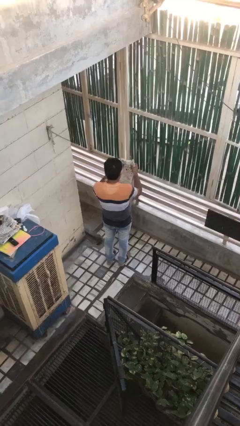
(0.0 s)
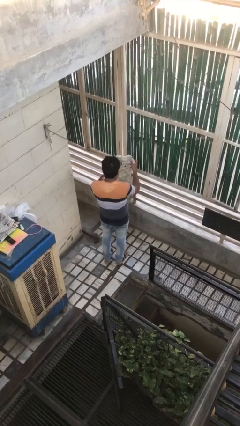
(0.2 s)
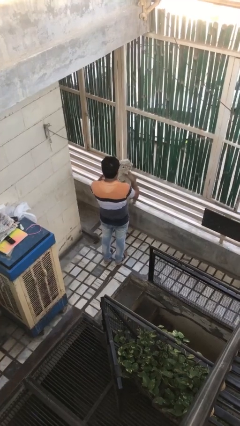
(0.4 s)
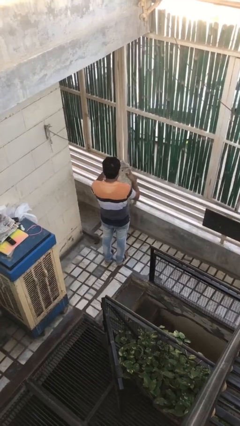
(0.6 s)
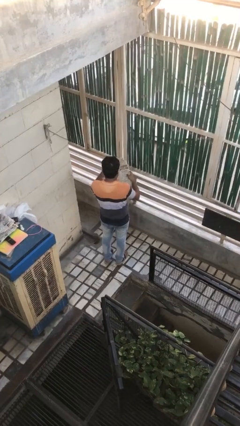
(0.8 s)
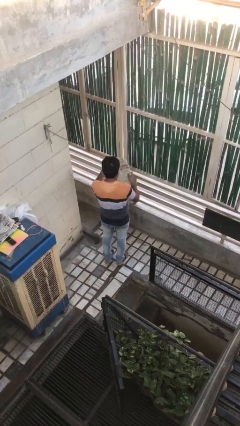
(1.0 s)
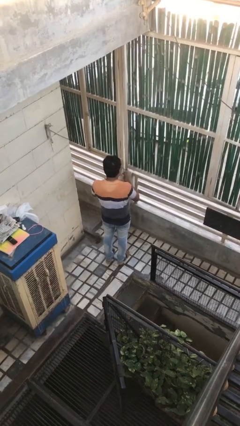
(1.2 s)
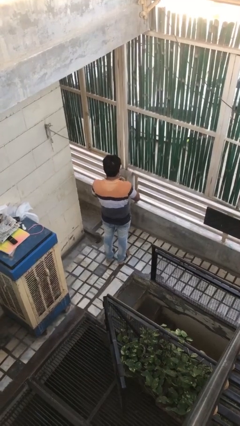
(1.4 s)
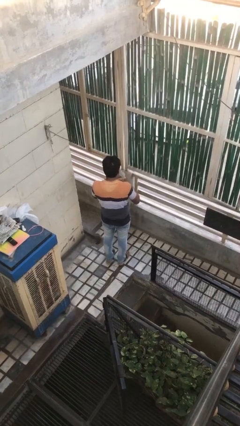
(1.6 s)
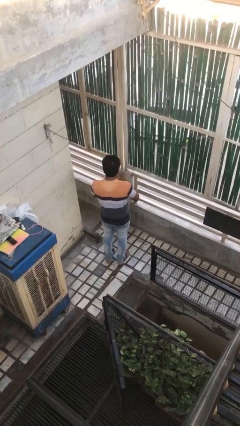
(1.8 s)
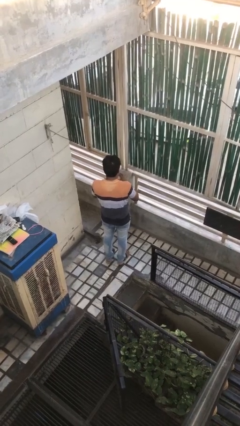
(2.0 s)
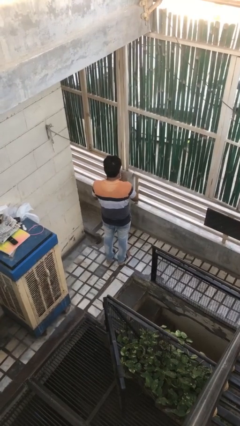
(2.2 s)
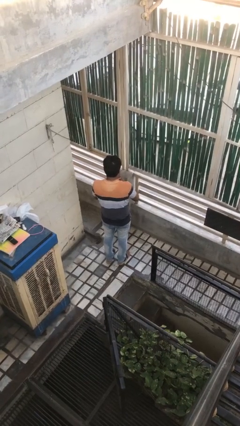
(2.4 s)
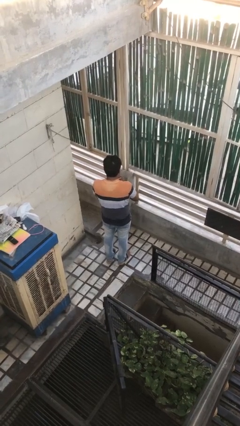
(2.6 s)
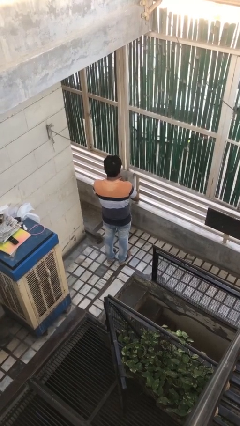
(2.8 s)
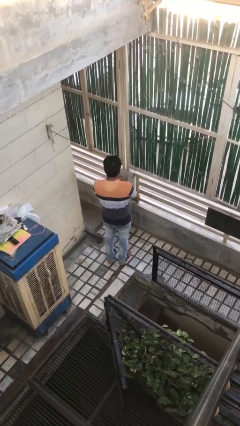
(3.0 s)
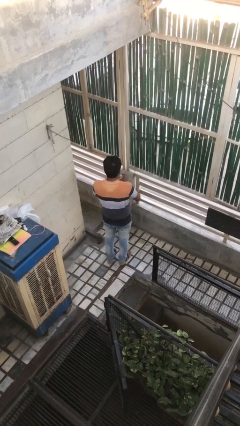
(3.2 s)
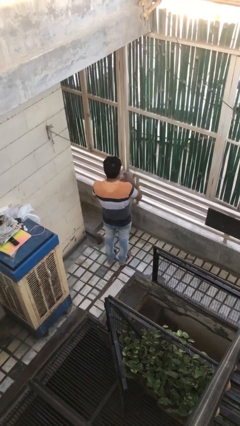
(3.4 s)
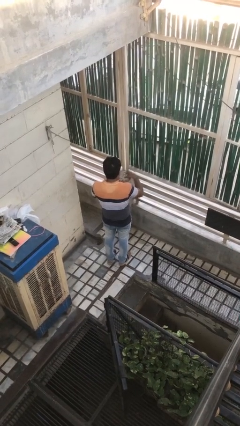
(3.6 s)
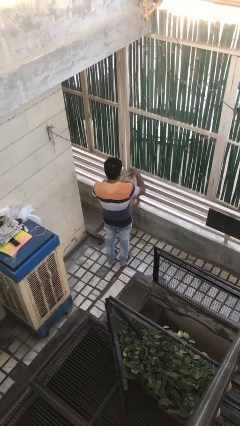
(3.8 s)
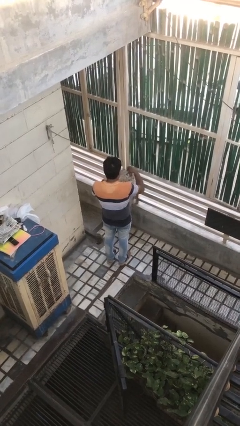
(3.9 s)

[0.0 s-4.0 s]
person crumples paper

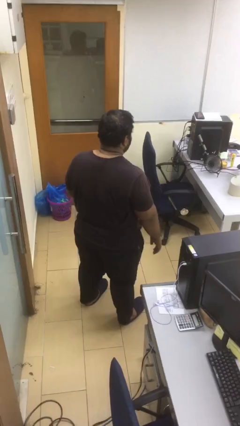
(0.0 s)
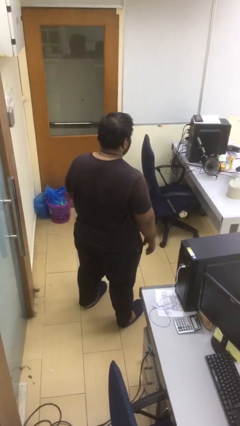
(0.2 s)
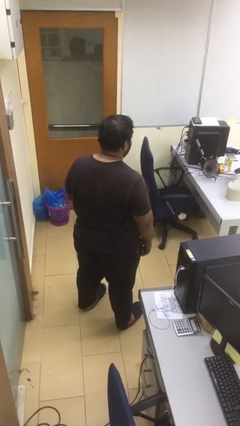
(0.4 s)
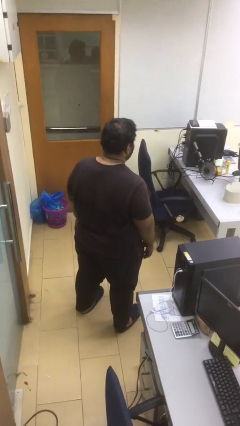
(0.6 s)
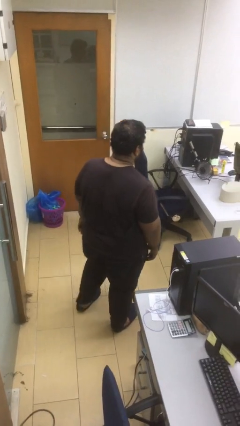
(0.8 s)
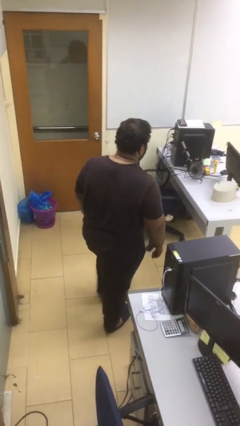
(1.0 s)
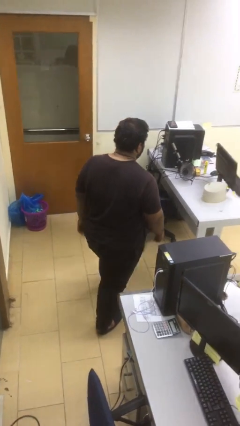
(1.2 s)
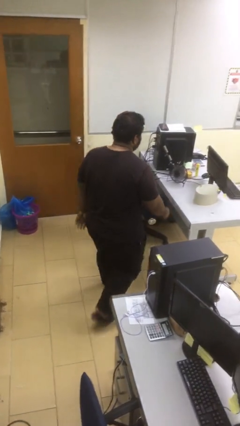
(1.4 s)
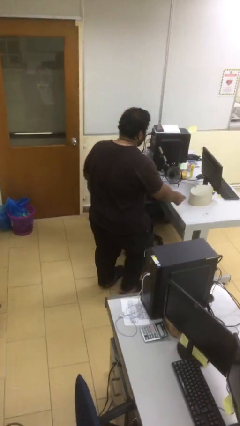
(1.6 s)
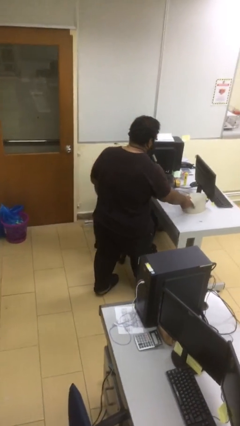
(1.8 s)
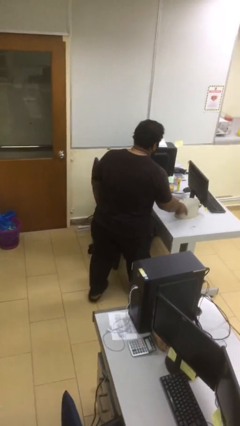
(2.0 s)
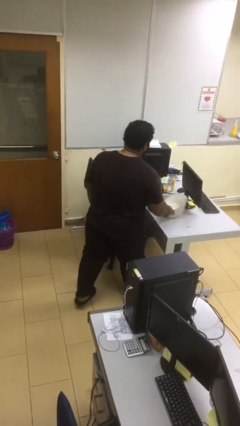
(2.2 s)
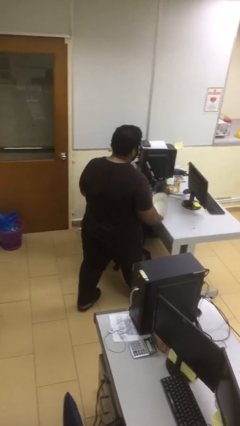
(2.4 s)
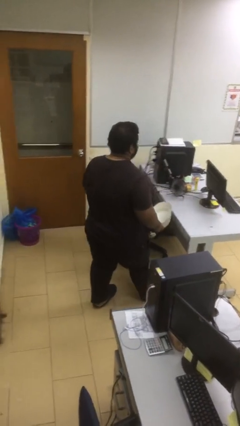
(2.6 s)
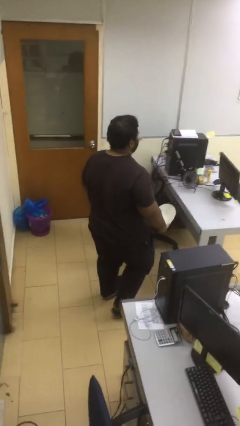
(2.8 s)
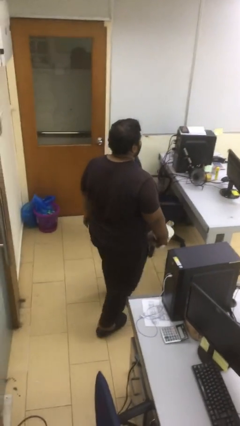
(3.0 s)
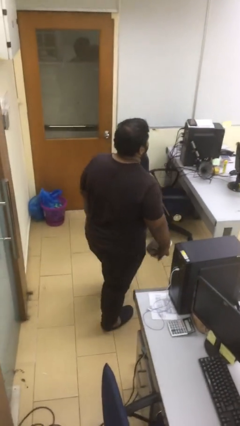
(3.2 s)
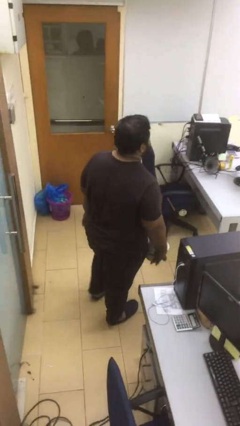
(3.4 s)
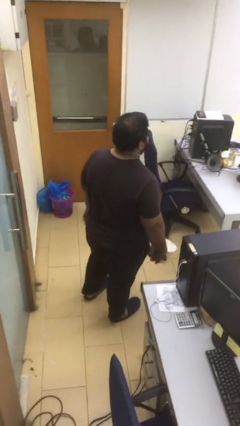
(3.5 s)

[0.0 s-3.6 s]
person picks up object from table

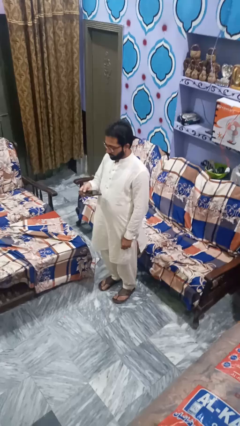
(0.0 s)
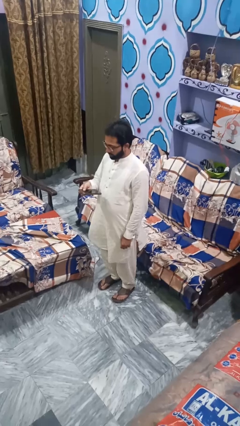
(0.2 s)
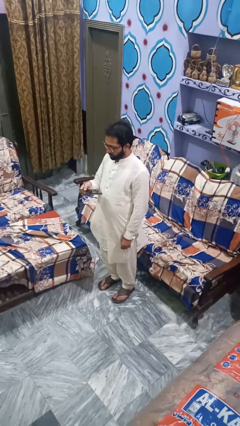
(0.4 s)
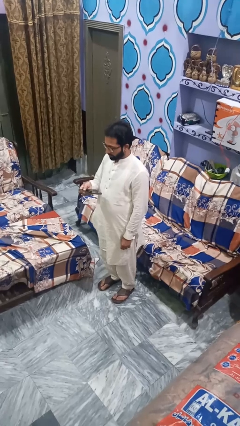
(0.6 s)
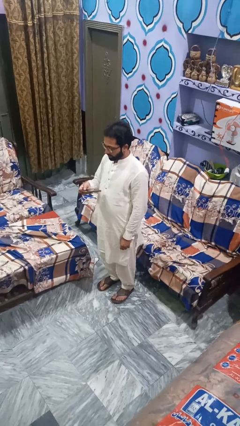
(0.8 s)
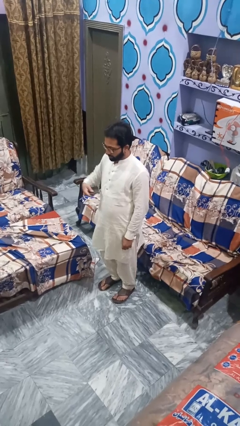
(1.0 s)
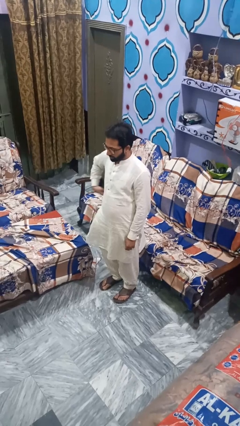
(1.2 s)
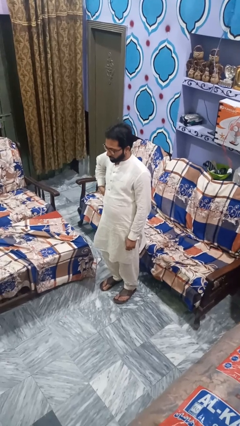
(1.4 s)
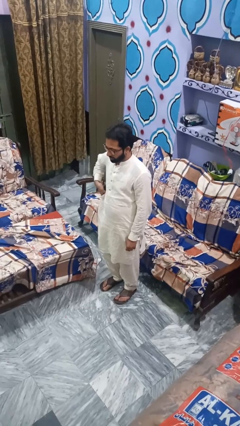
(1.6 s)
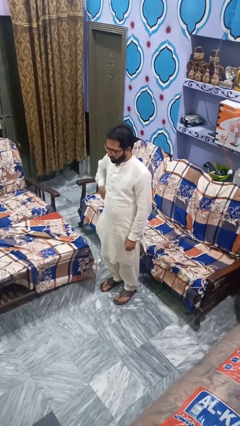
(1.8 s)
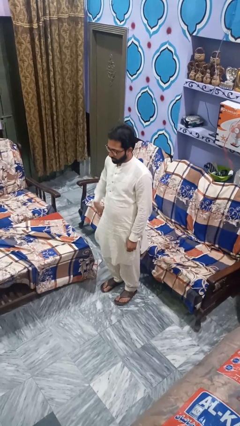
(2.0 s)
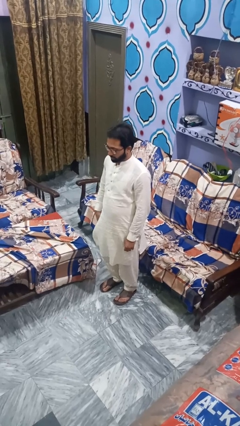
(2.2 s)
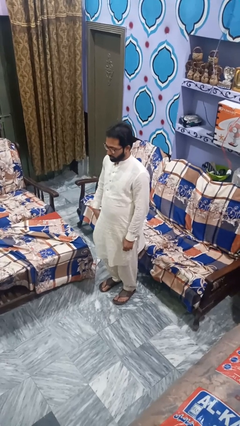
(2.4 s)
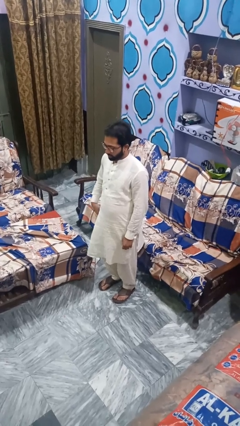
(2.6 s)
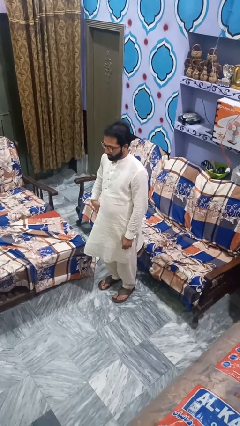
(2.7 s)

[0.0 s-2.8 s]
person puts phone into pocket

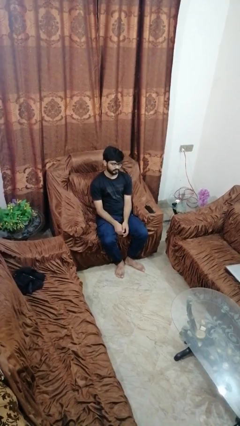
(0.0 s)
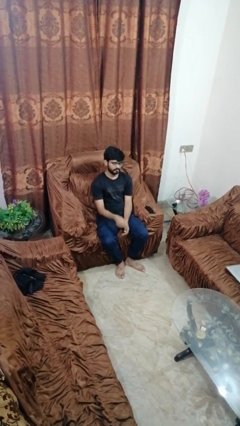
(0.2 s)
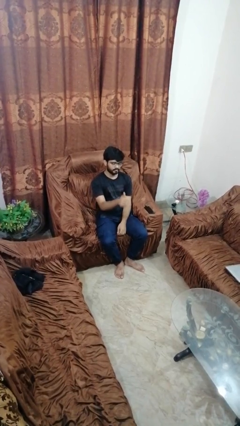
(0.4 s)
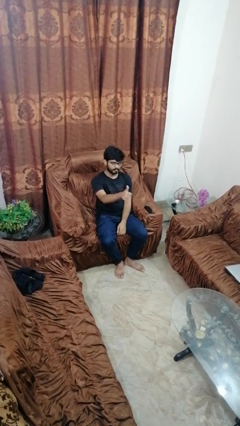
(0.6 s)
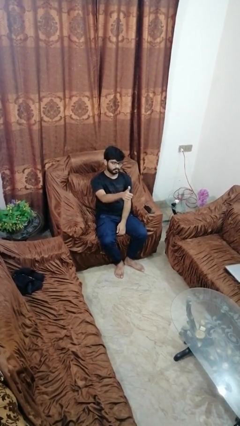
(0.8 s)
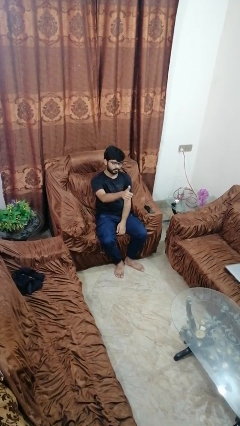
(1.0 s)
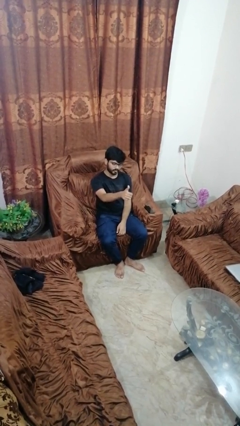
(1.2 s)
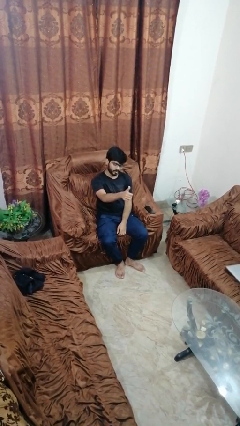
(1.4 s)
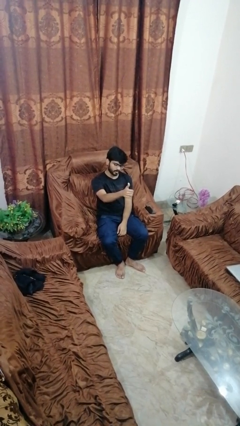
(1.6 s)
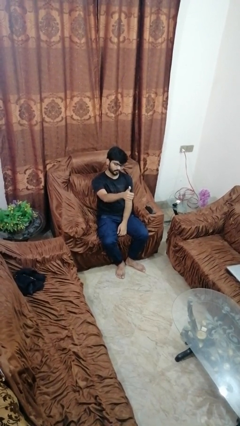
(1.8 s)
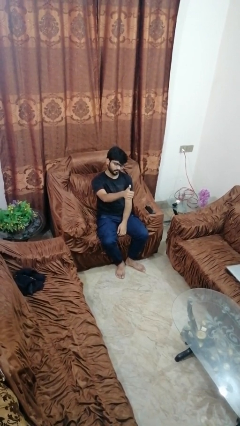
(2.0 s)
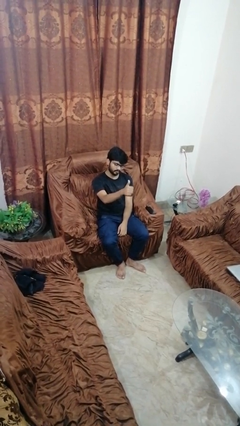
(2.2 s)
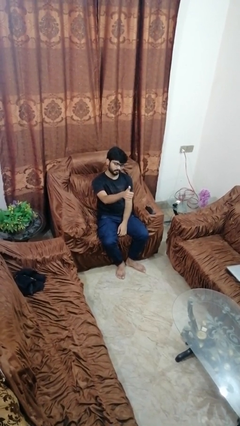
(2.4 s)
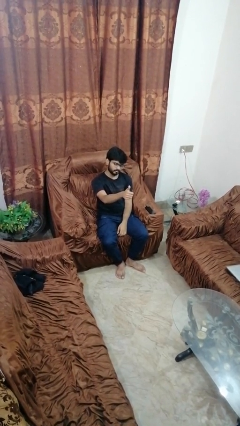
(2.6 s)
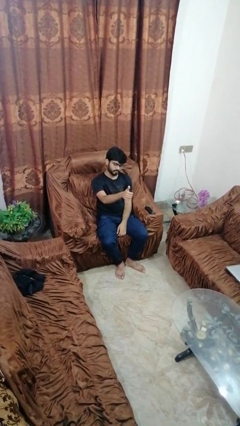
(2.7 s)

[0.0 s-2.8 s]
person gestures thumbs up

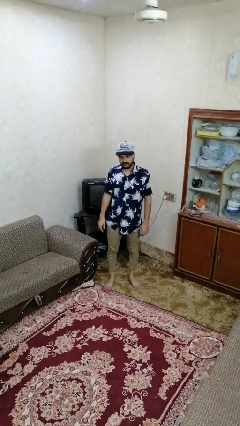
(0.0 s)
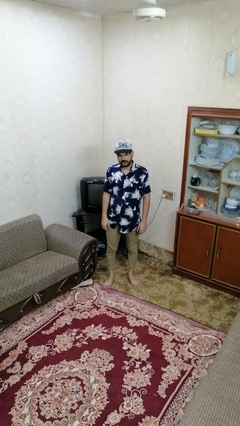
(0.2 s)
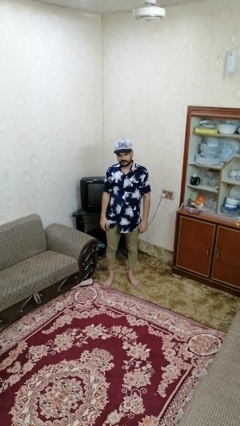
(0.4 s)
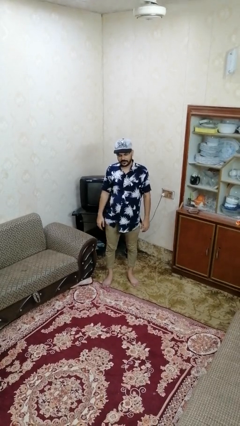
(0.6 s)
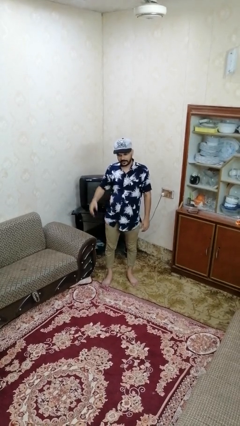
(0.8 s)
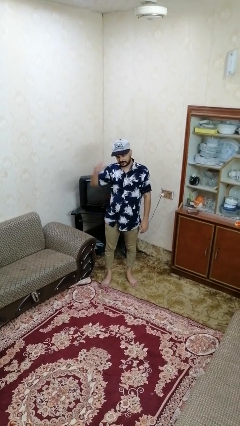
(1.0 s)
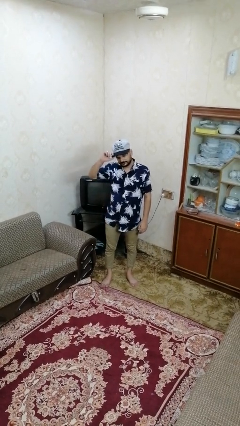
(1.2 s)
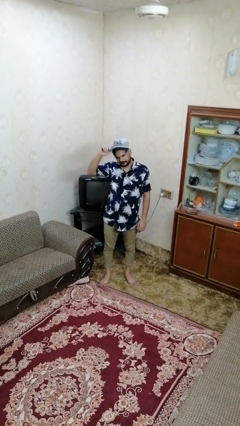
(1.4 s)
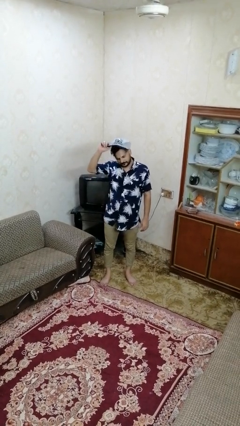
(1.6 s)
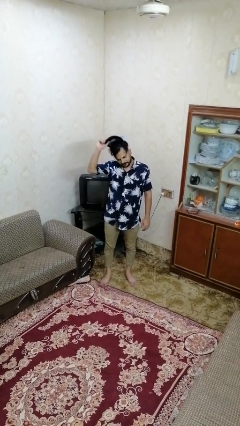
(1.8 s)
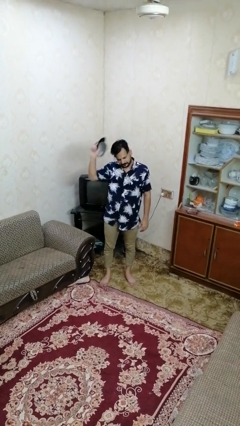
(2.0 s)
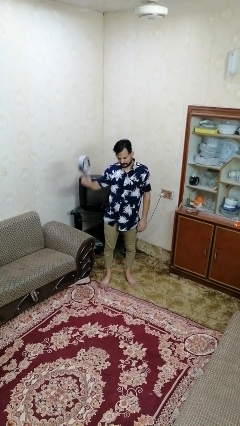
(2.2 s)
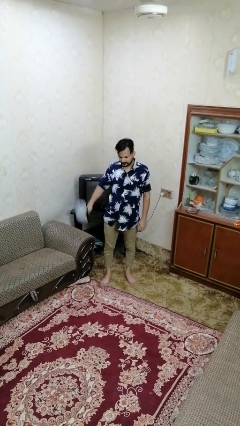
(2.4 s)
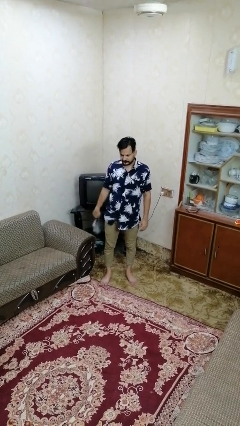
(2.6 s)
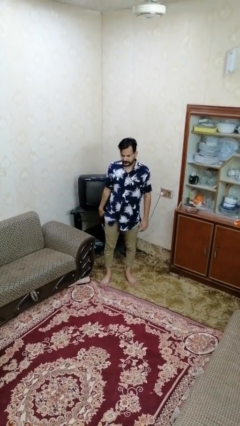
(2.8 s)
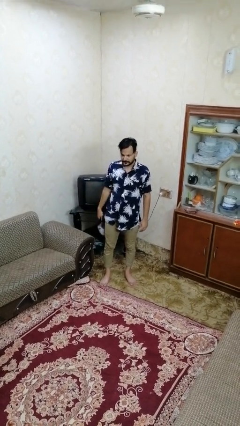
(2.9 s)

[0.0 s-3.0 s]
person takes off hat

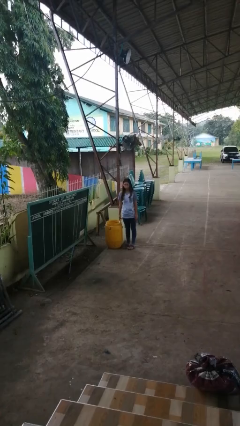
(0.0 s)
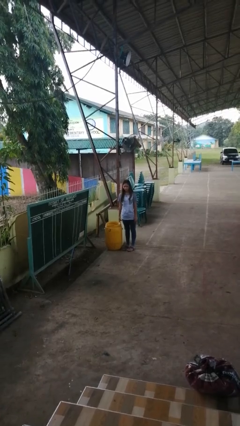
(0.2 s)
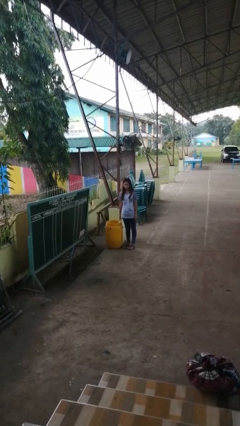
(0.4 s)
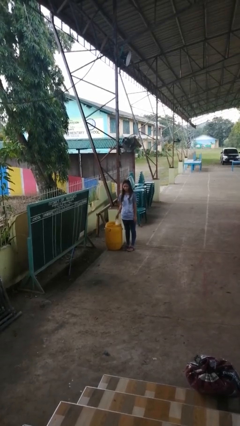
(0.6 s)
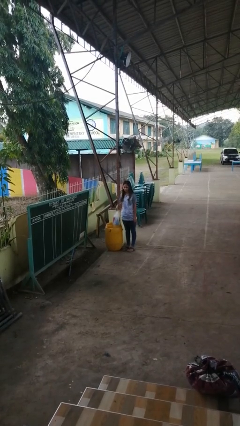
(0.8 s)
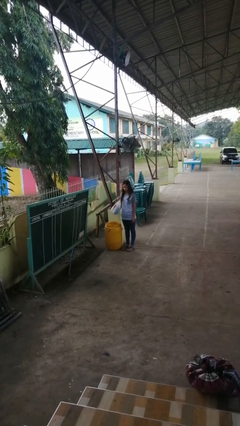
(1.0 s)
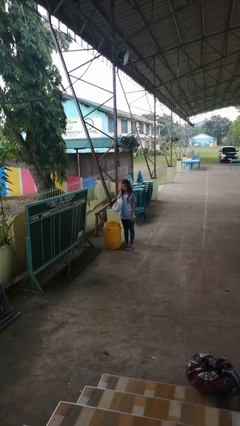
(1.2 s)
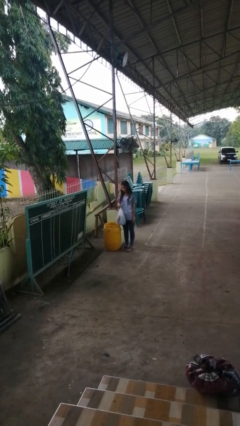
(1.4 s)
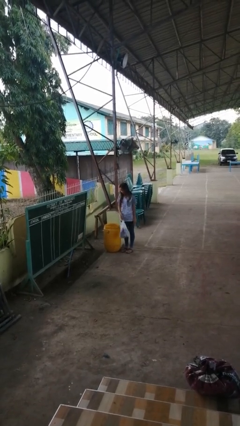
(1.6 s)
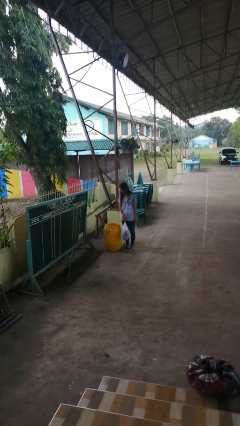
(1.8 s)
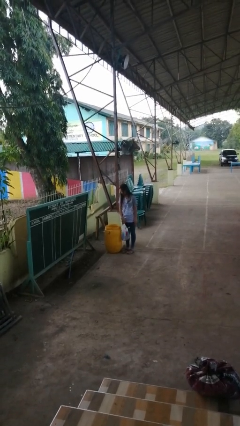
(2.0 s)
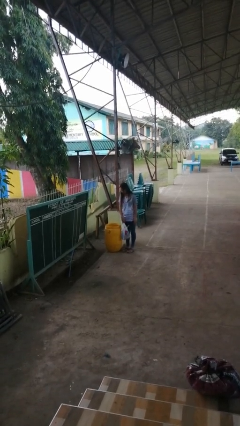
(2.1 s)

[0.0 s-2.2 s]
person removes trashbag from trashcan
